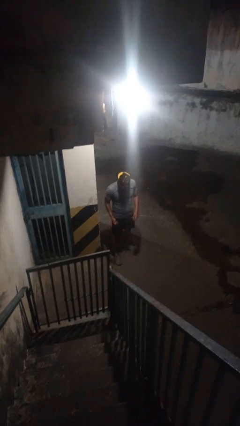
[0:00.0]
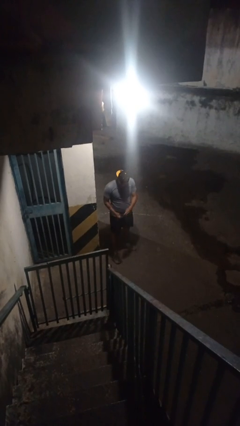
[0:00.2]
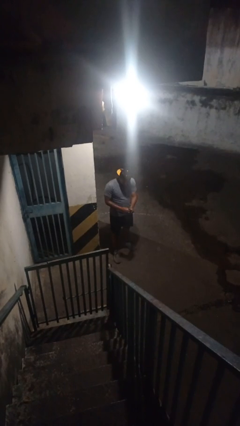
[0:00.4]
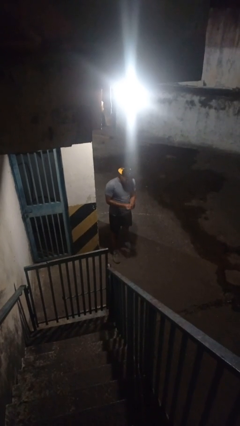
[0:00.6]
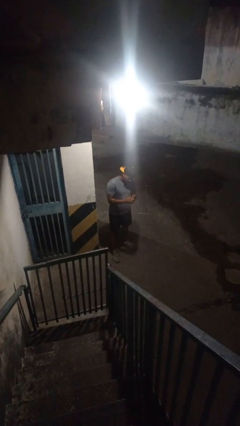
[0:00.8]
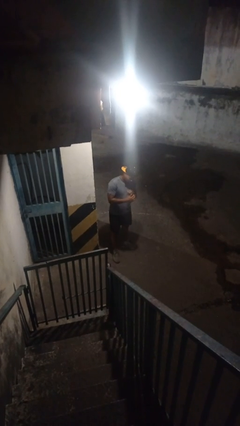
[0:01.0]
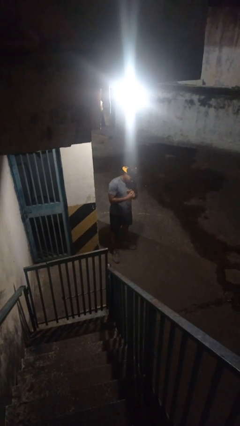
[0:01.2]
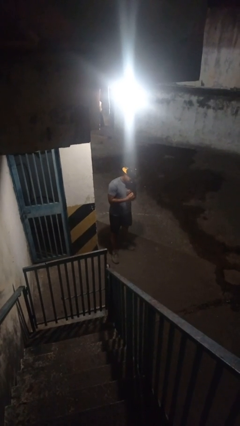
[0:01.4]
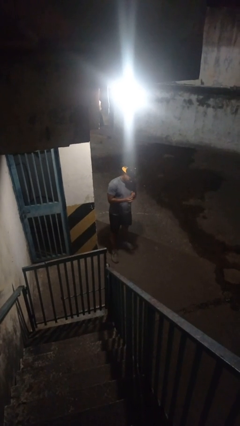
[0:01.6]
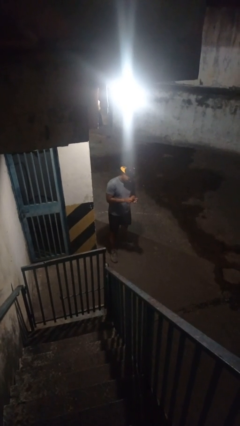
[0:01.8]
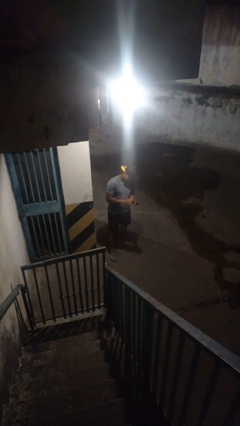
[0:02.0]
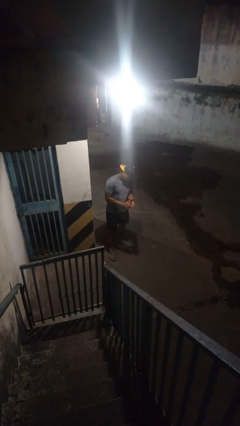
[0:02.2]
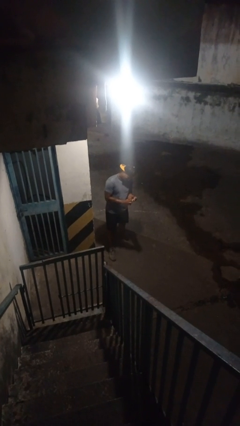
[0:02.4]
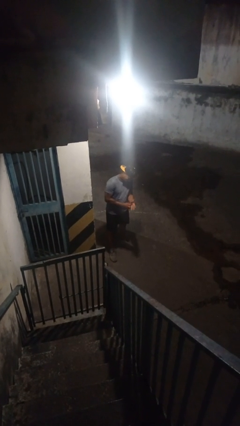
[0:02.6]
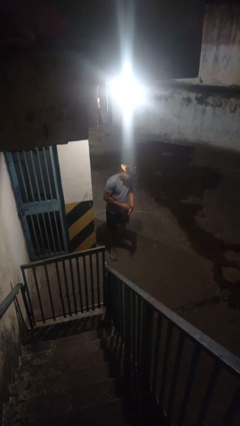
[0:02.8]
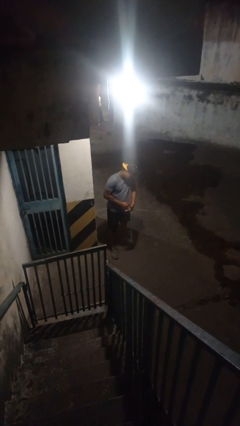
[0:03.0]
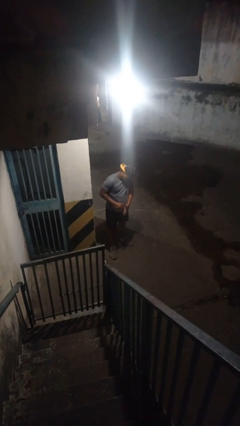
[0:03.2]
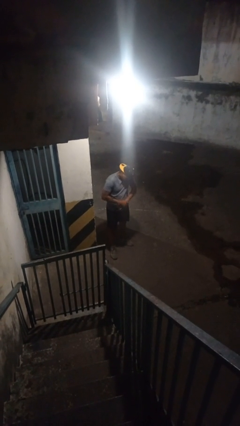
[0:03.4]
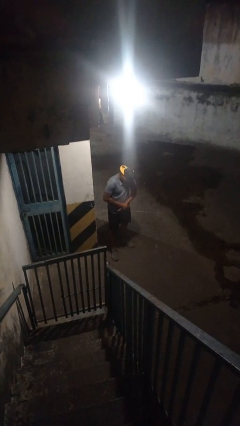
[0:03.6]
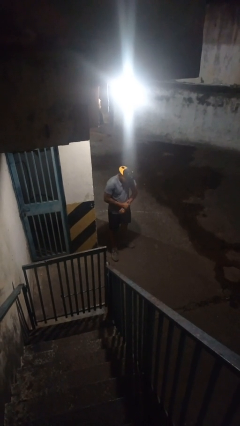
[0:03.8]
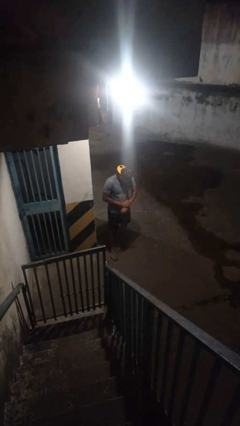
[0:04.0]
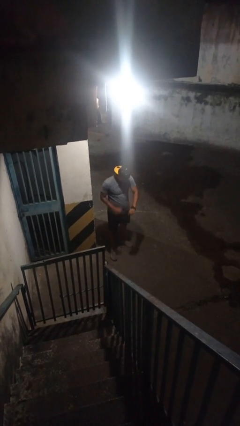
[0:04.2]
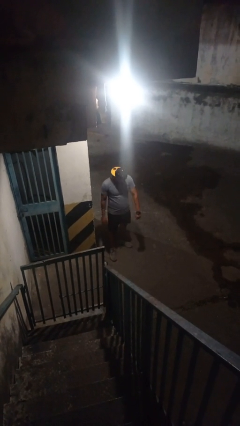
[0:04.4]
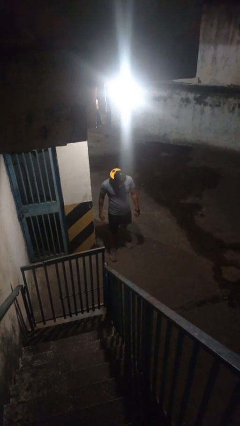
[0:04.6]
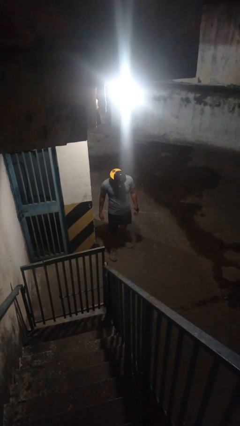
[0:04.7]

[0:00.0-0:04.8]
person puts on wristwatch

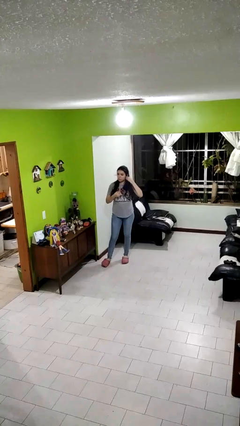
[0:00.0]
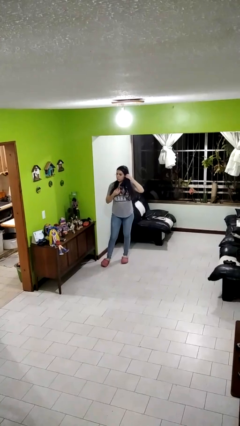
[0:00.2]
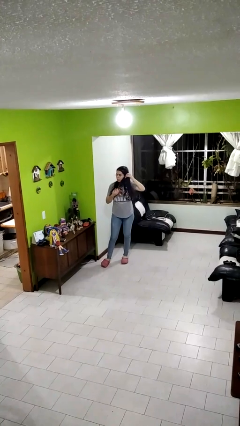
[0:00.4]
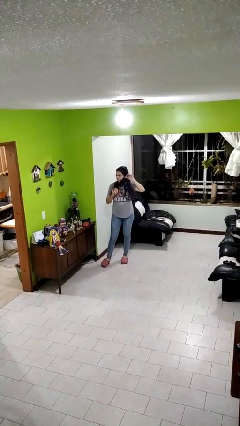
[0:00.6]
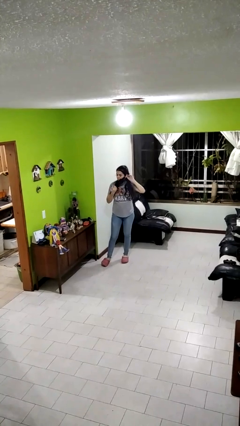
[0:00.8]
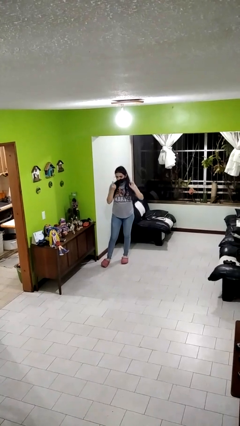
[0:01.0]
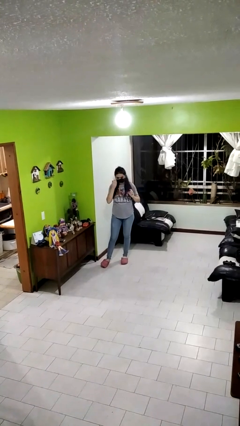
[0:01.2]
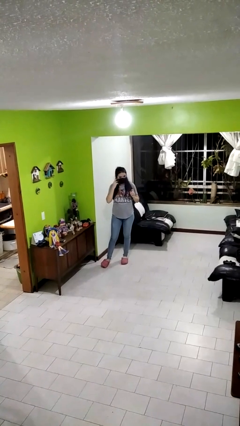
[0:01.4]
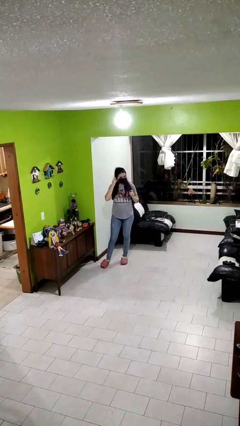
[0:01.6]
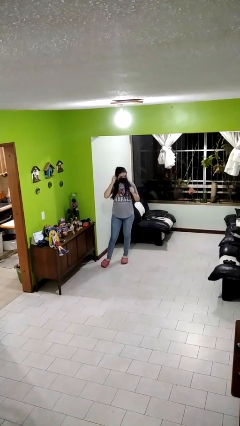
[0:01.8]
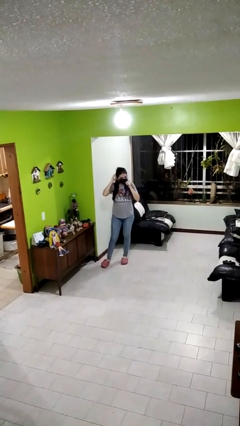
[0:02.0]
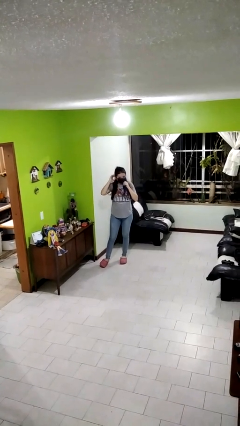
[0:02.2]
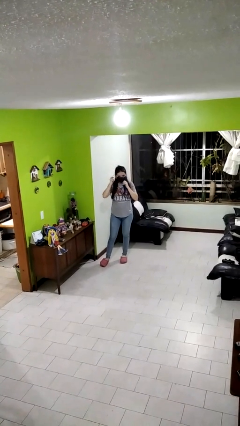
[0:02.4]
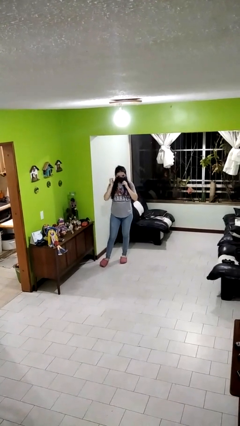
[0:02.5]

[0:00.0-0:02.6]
person puts on facemask

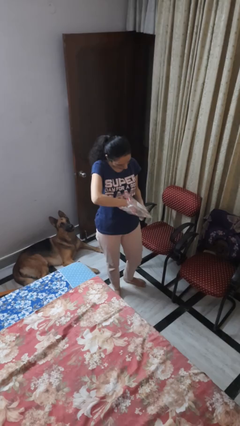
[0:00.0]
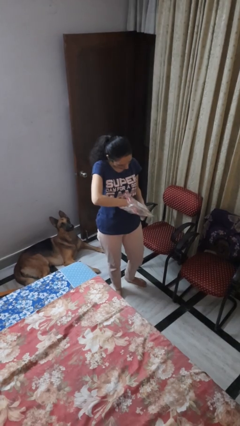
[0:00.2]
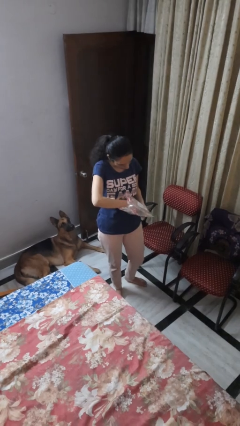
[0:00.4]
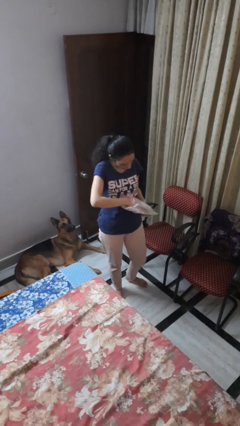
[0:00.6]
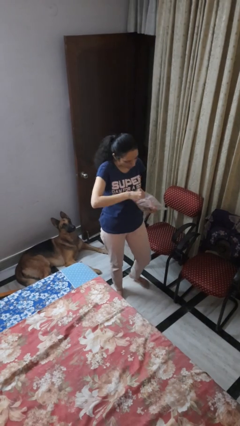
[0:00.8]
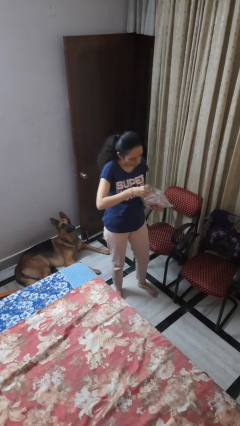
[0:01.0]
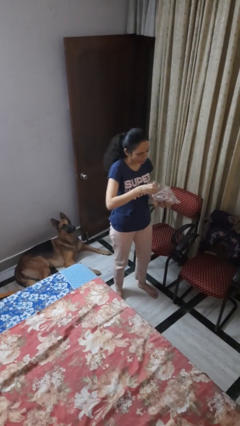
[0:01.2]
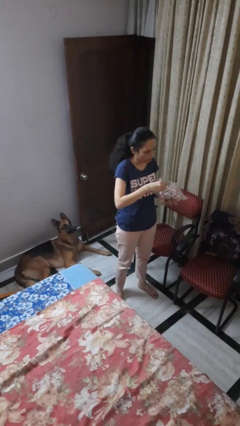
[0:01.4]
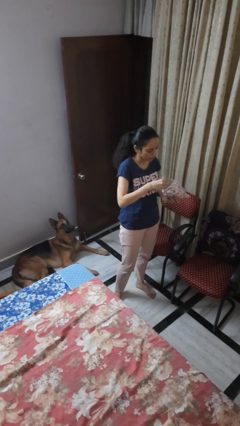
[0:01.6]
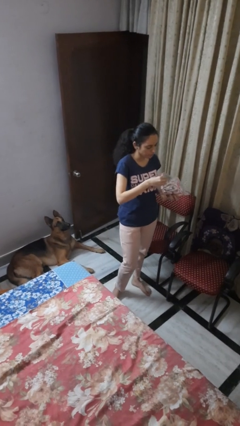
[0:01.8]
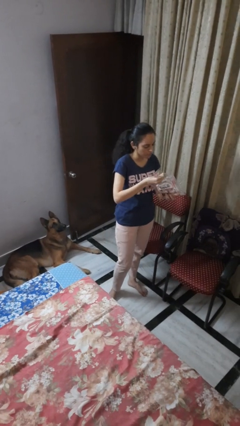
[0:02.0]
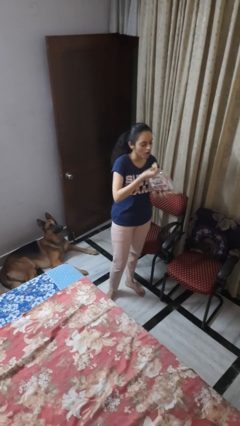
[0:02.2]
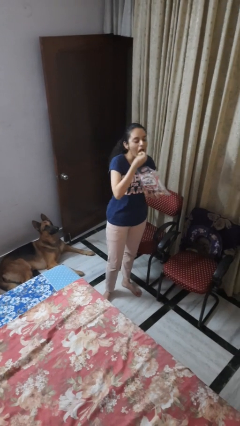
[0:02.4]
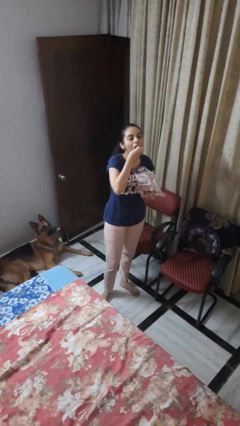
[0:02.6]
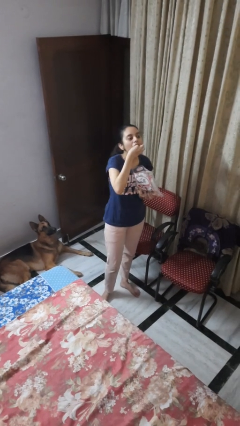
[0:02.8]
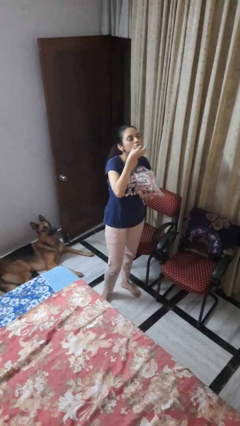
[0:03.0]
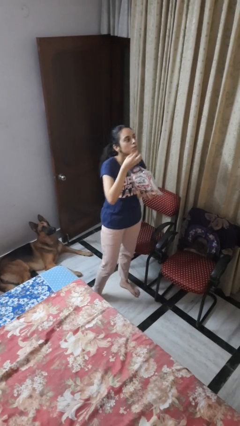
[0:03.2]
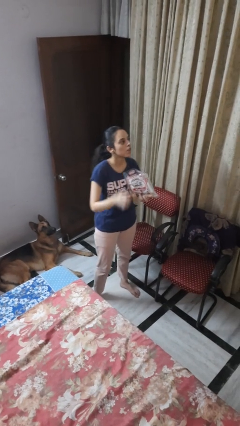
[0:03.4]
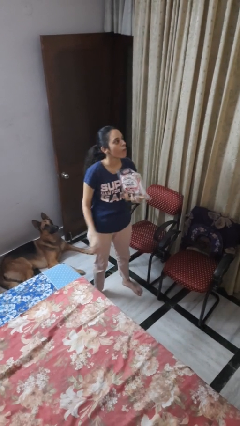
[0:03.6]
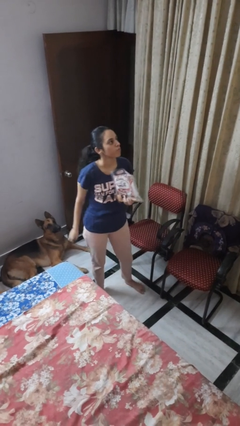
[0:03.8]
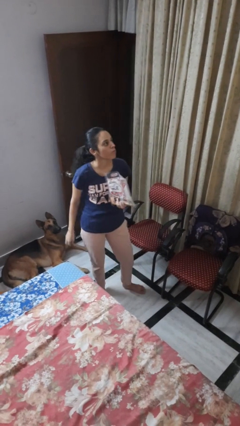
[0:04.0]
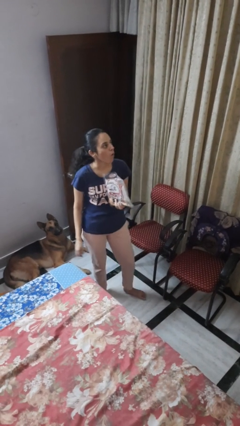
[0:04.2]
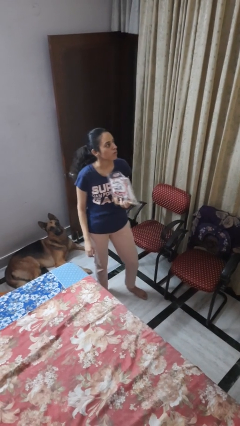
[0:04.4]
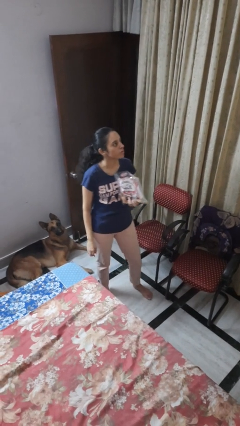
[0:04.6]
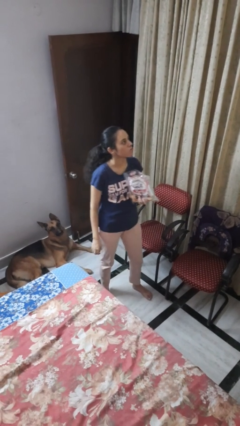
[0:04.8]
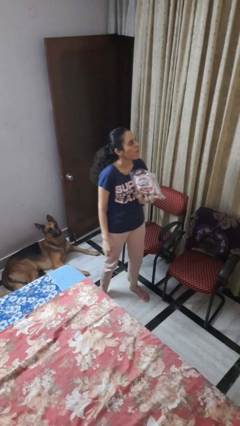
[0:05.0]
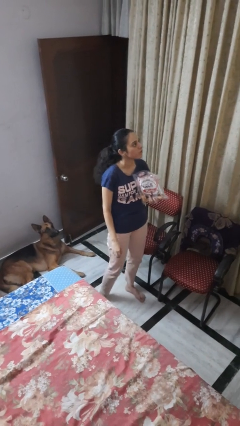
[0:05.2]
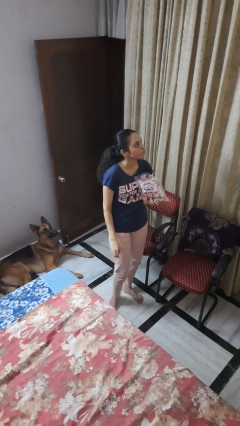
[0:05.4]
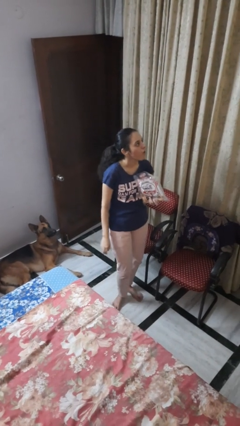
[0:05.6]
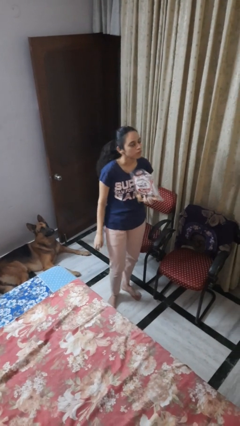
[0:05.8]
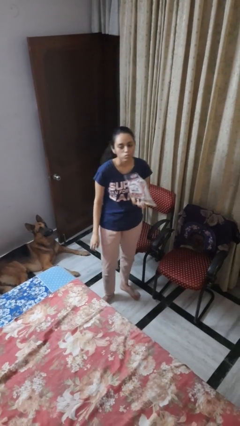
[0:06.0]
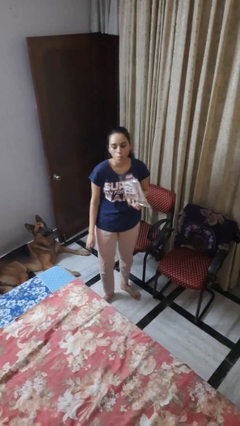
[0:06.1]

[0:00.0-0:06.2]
person eats snack from bag

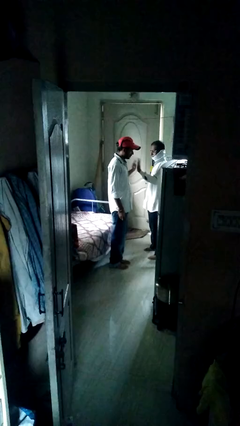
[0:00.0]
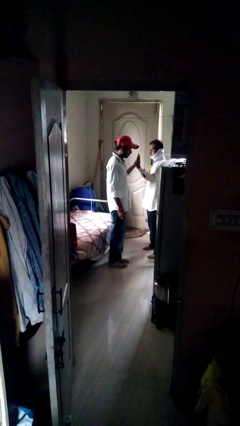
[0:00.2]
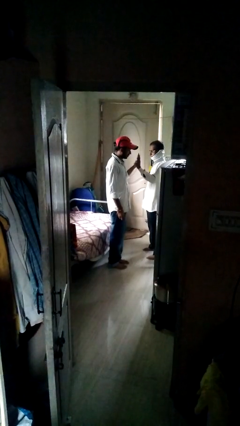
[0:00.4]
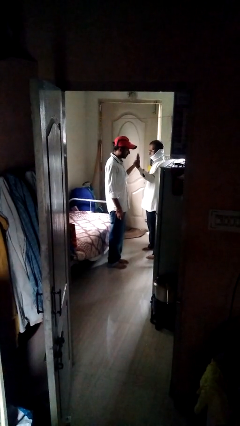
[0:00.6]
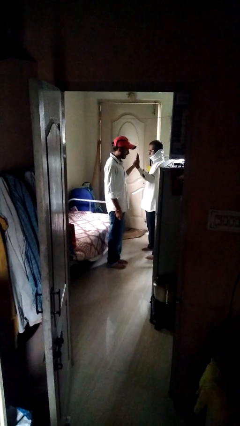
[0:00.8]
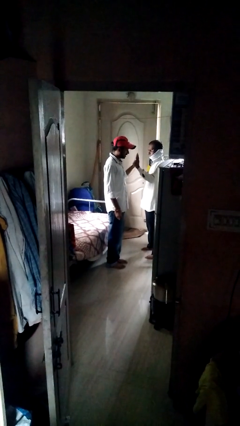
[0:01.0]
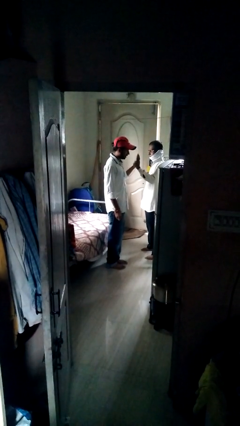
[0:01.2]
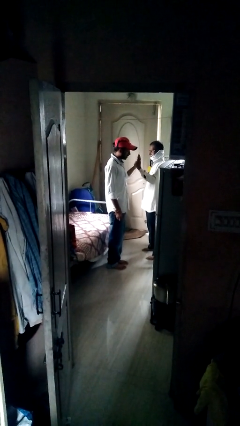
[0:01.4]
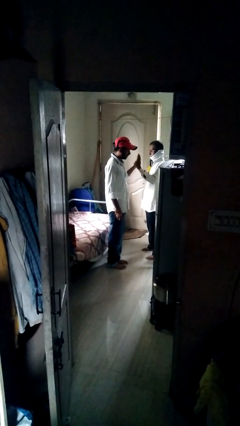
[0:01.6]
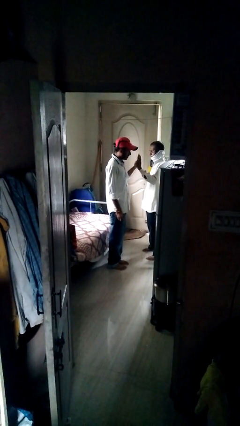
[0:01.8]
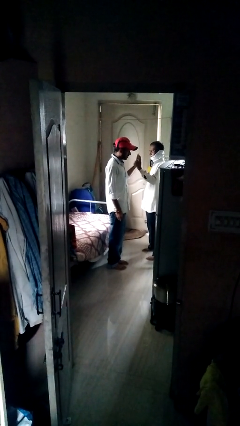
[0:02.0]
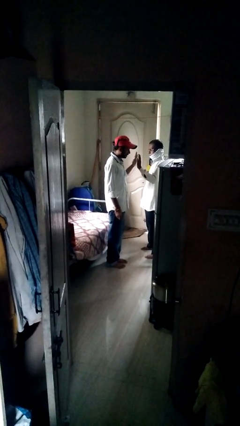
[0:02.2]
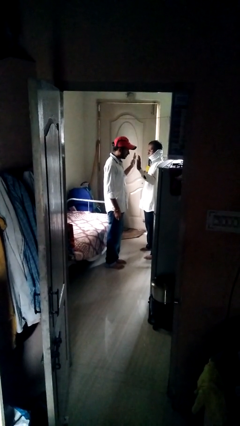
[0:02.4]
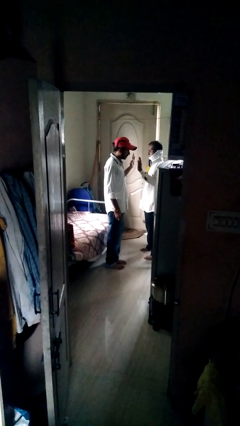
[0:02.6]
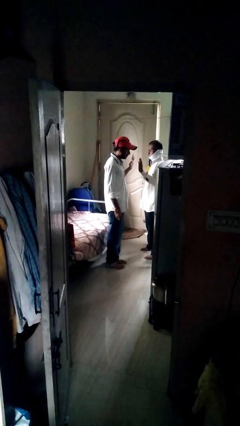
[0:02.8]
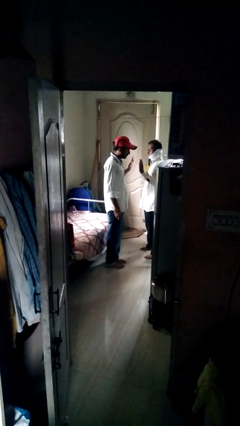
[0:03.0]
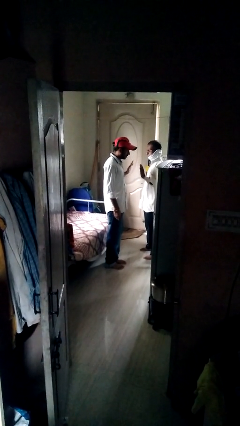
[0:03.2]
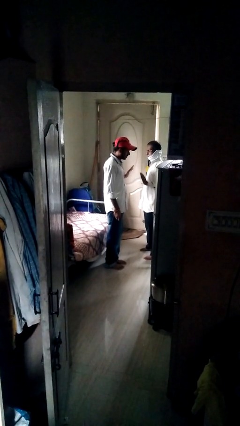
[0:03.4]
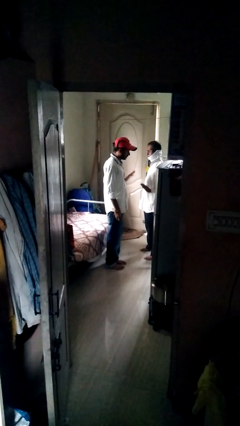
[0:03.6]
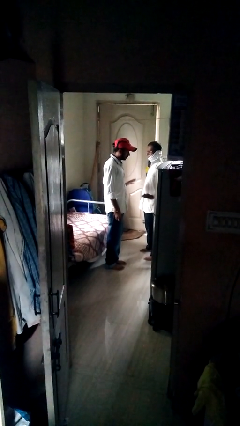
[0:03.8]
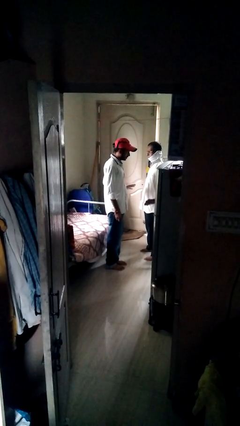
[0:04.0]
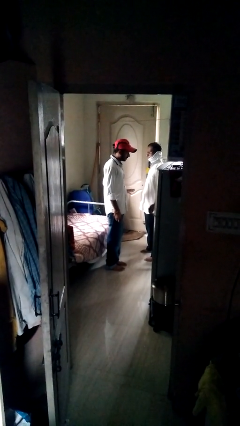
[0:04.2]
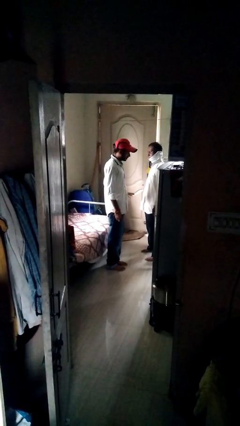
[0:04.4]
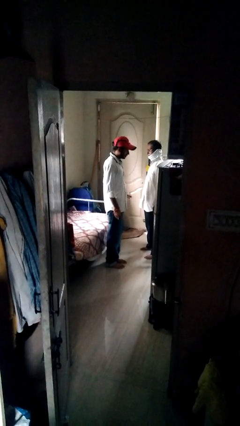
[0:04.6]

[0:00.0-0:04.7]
person highfives hand
